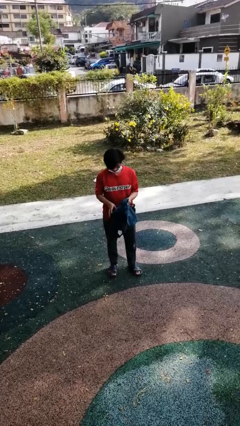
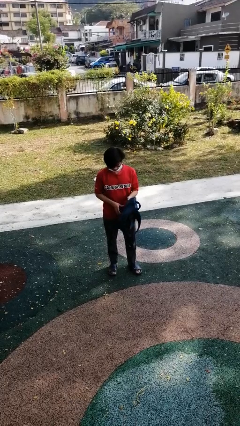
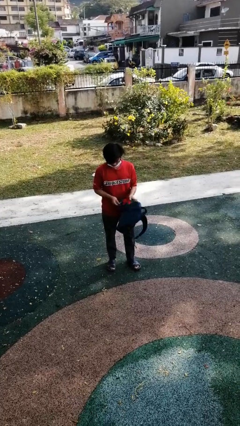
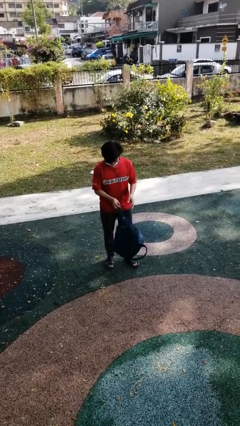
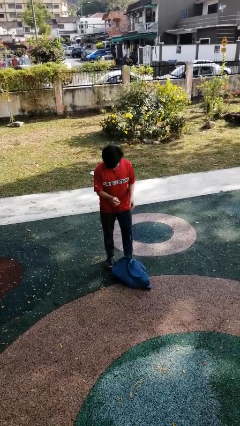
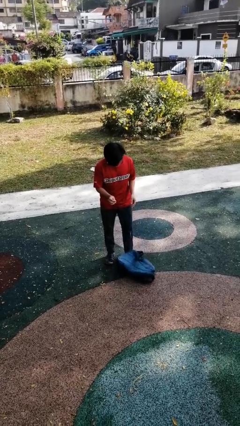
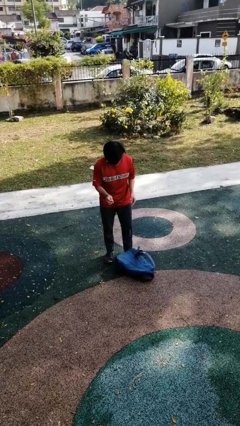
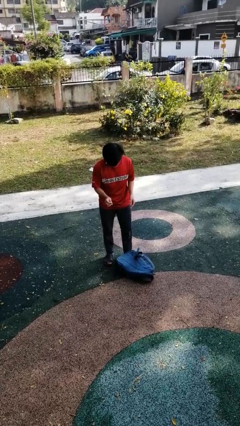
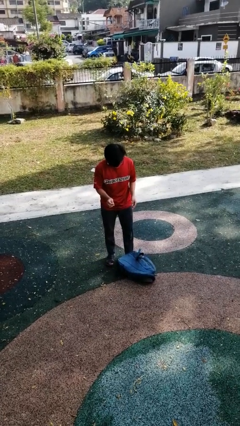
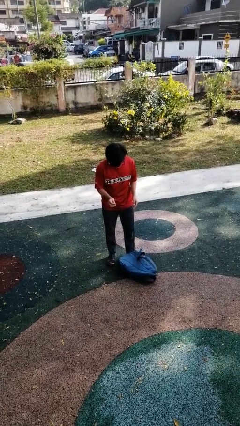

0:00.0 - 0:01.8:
person drops object

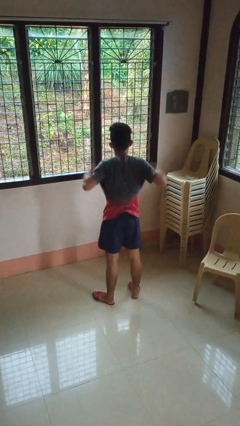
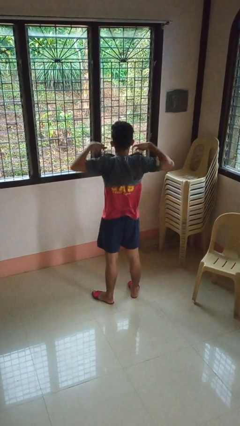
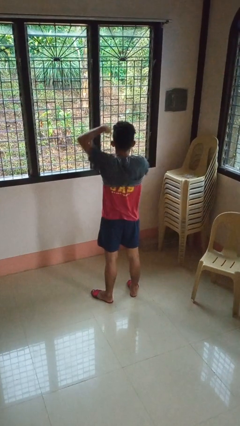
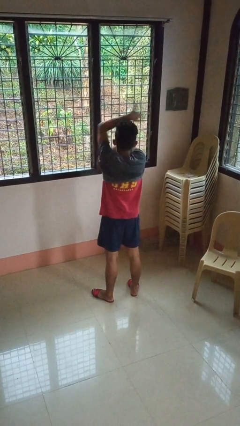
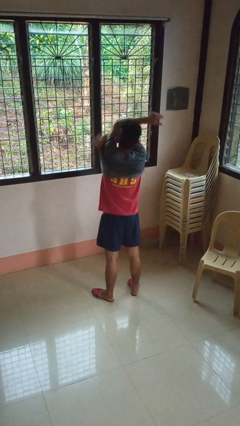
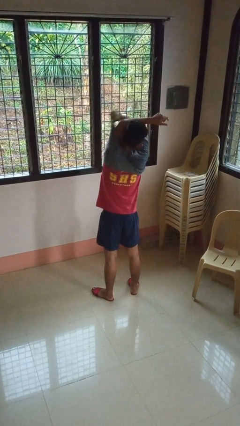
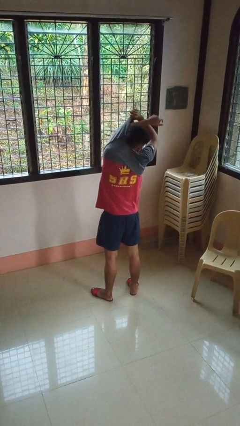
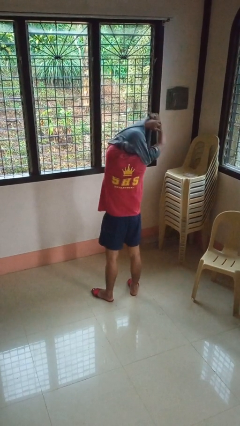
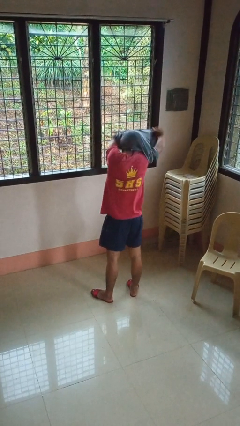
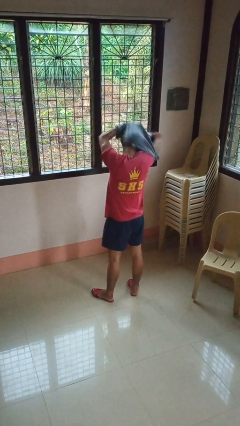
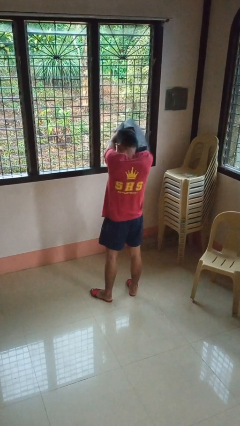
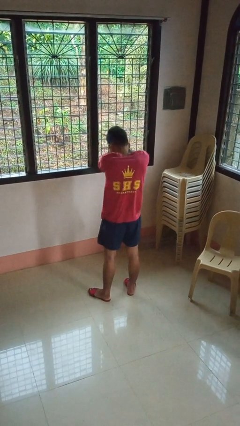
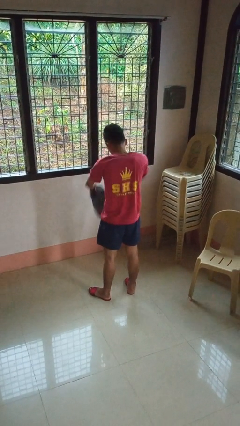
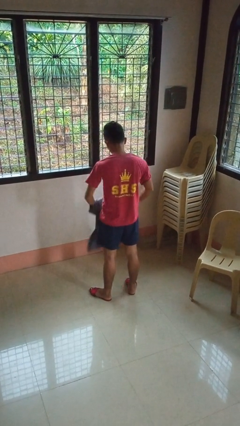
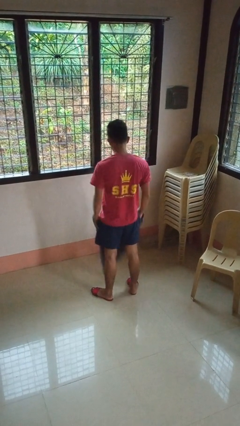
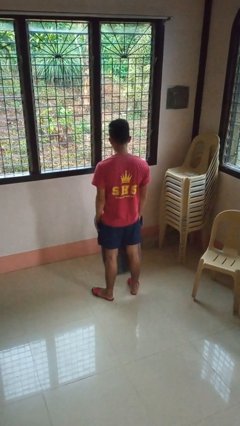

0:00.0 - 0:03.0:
person takes off shirt

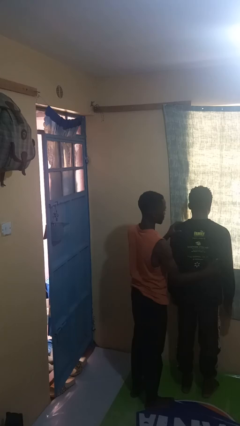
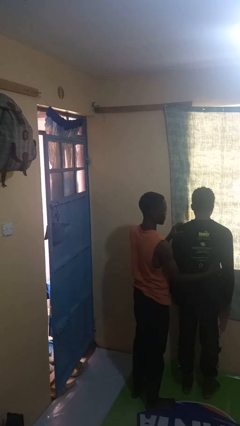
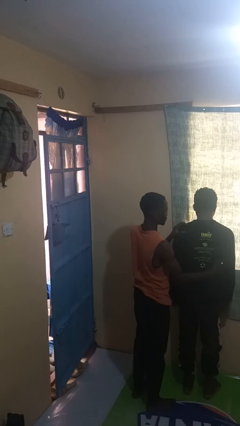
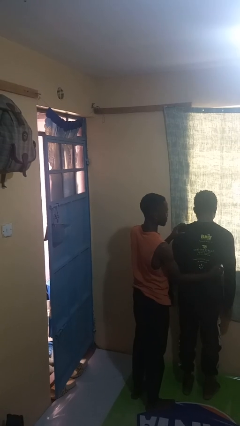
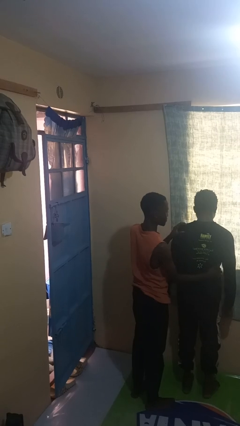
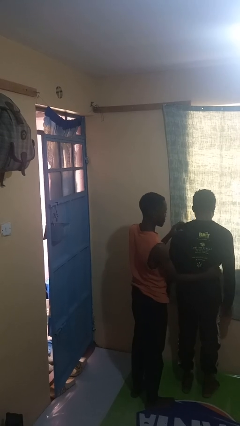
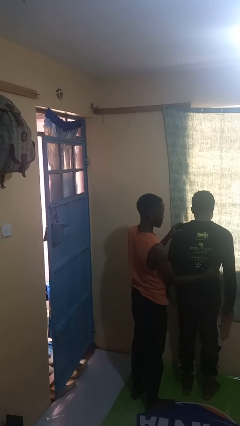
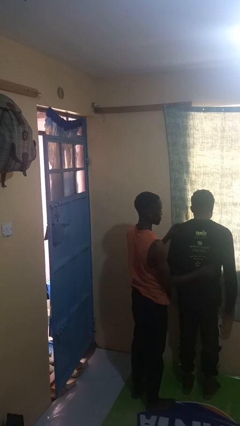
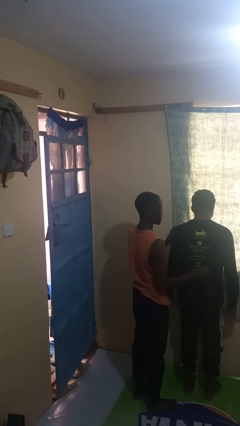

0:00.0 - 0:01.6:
person tickles person

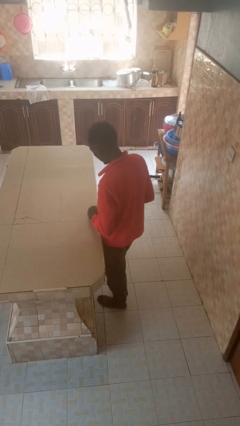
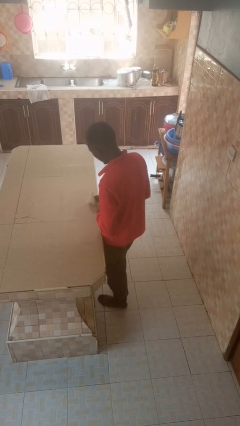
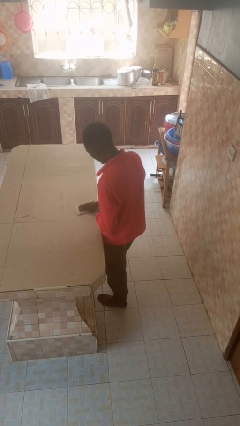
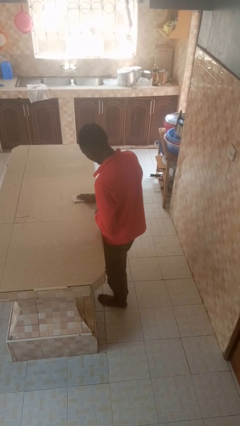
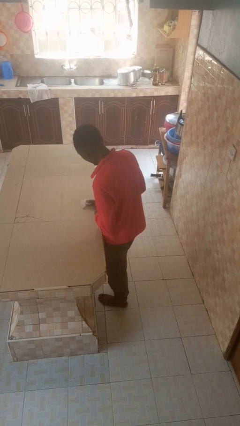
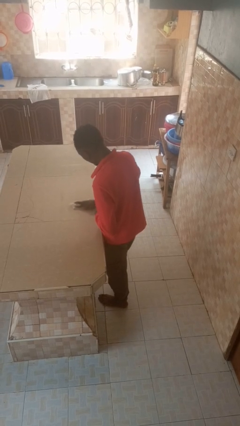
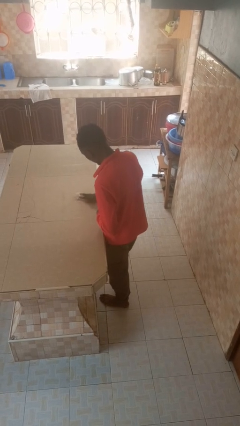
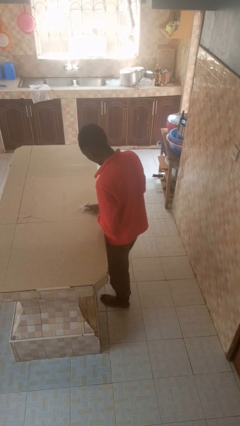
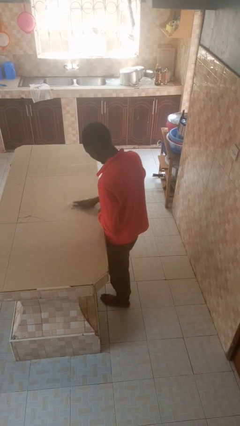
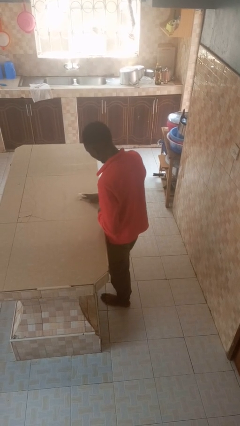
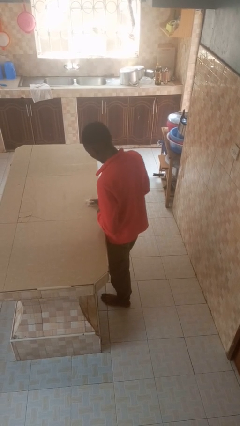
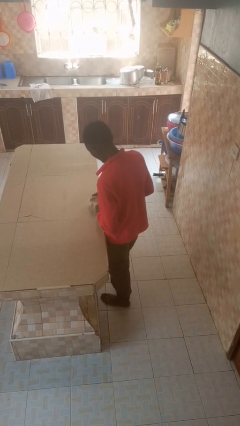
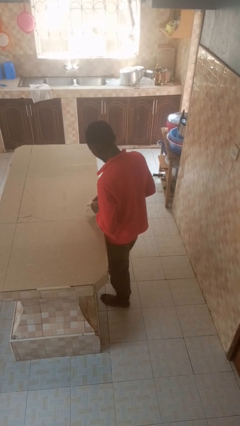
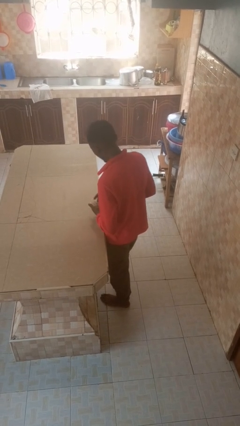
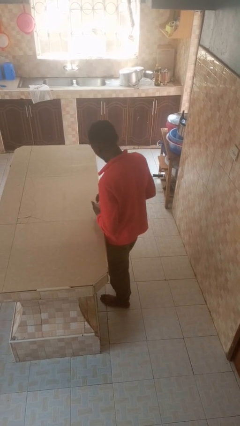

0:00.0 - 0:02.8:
person cleans table with rag

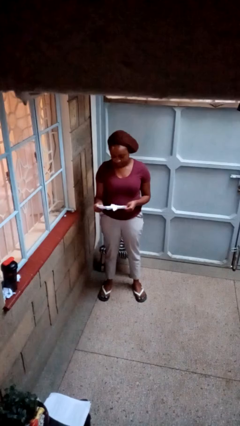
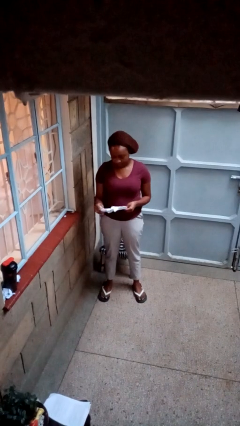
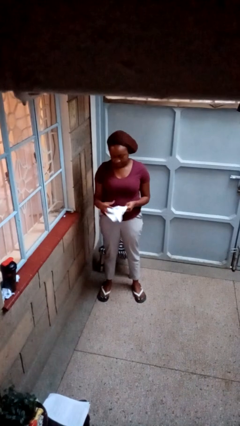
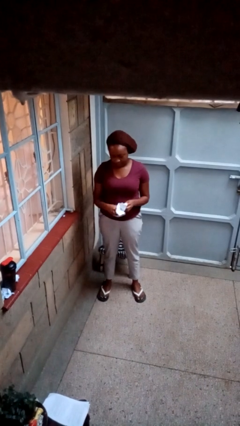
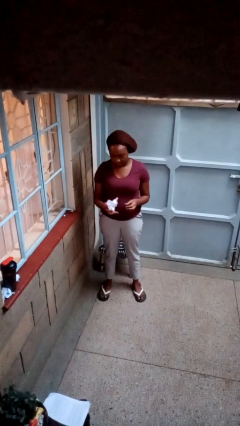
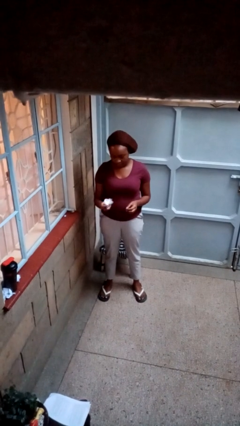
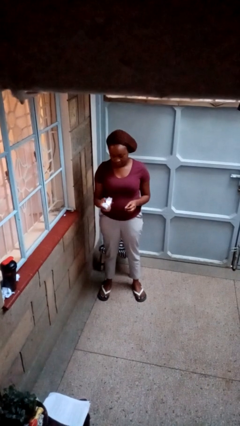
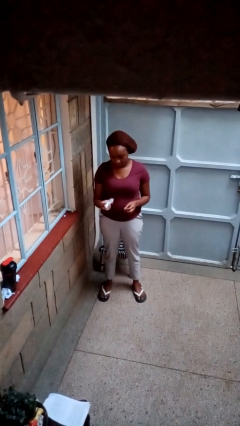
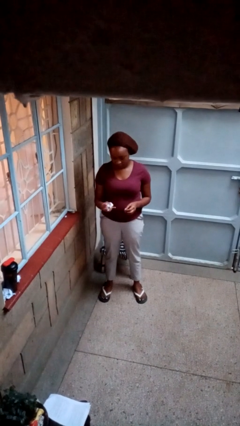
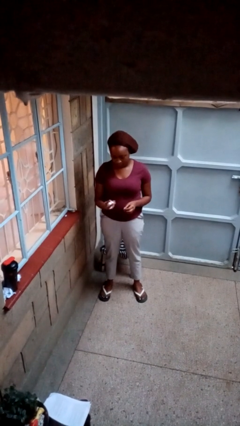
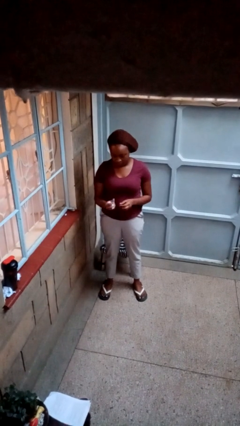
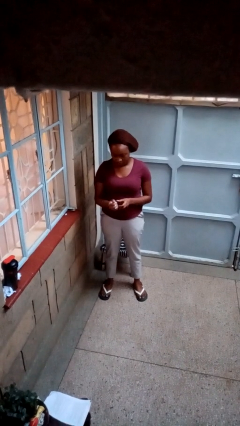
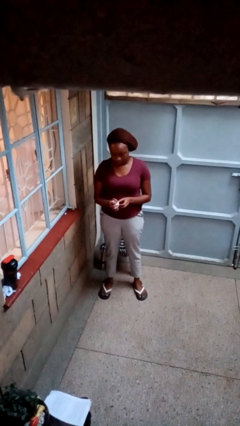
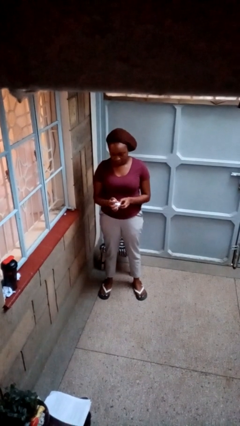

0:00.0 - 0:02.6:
person crumples paper

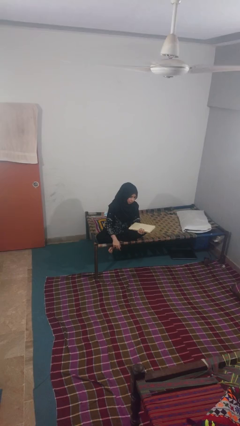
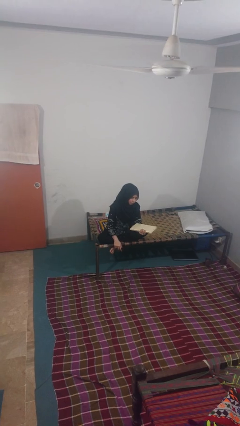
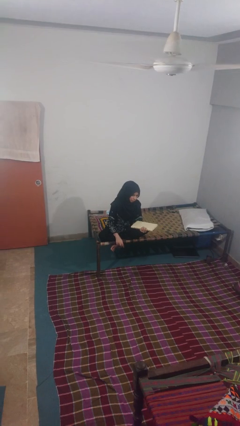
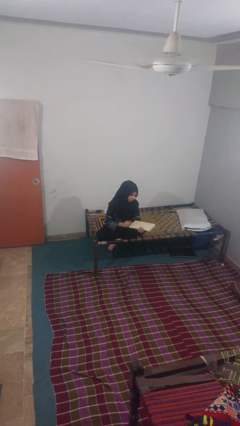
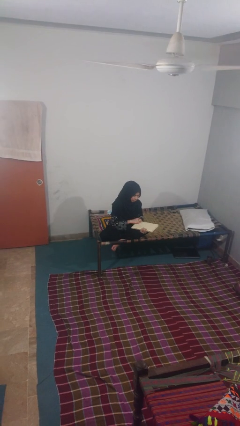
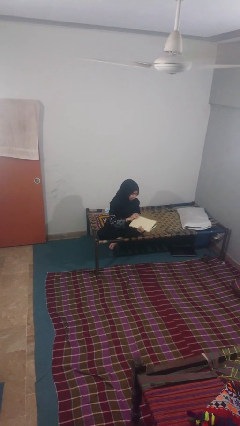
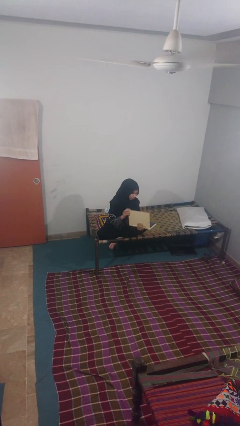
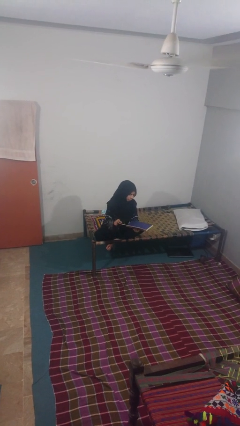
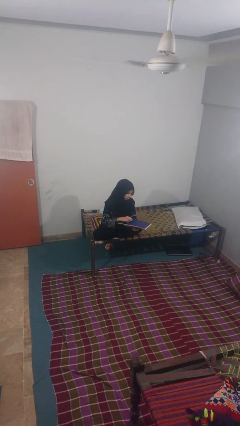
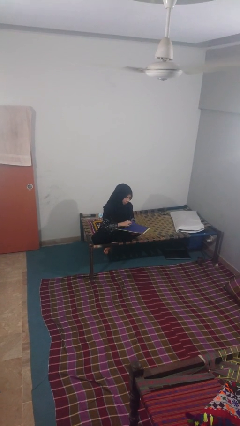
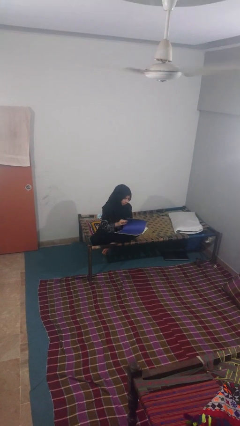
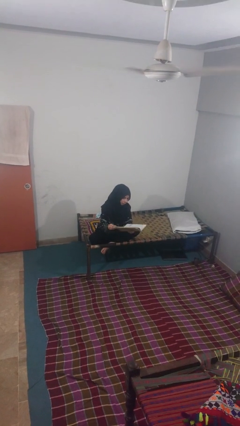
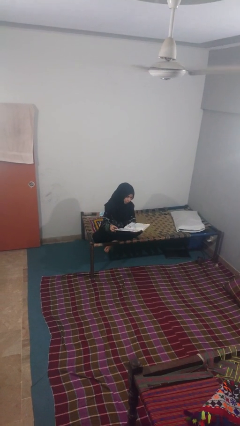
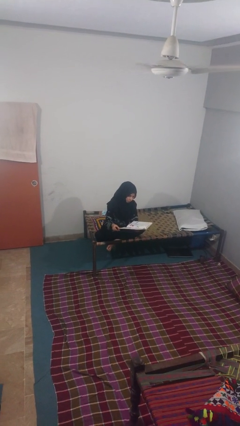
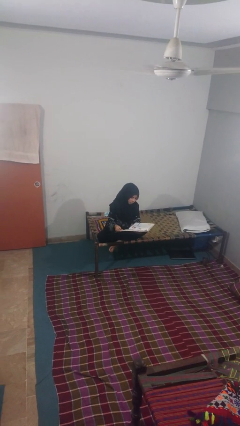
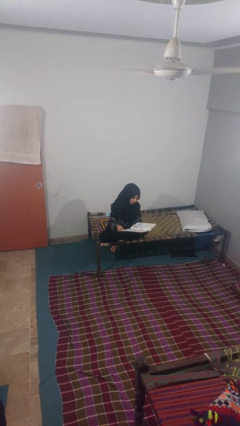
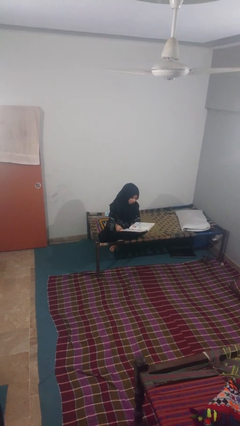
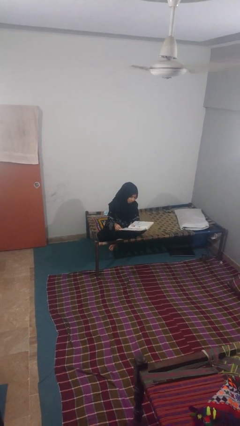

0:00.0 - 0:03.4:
person reads magazine

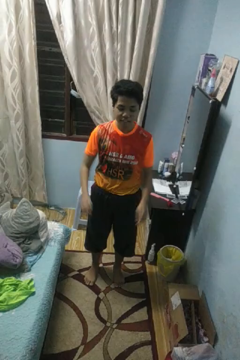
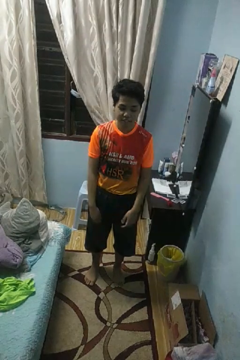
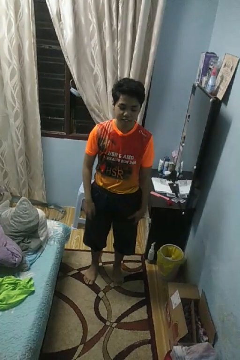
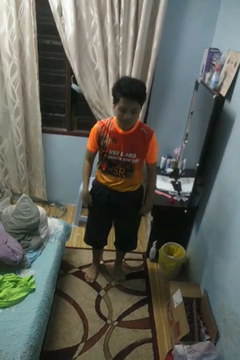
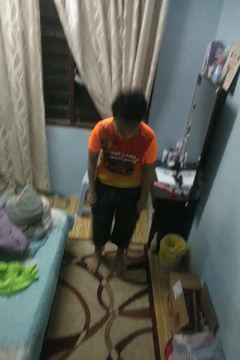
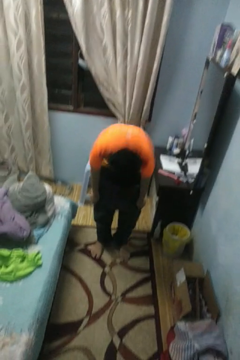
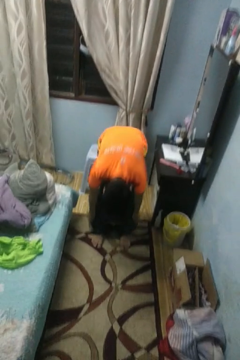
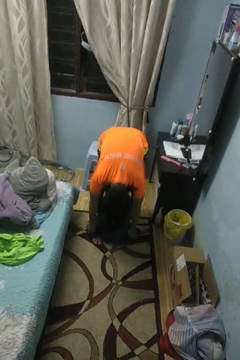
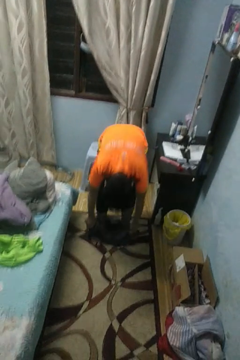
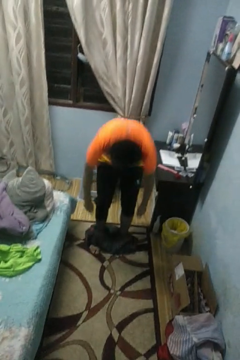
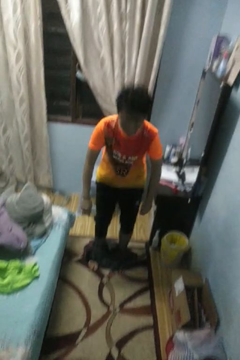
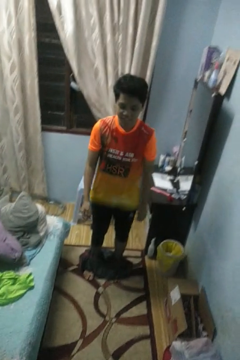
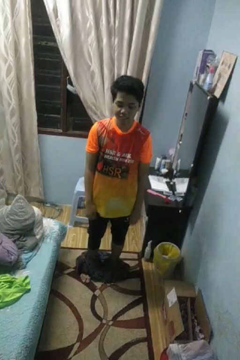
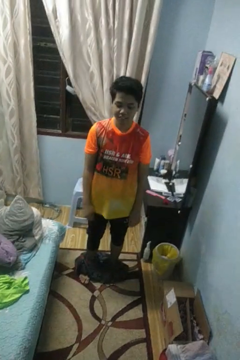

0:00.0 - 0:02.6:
person takes off pants
